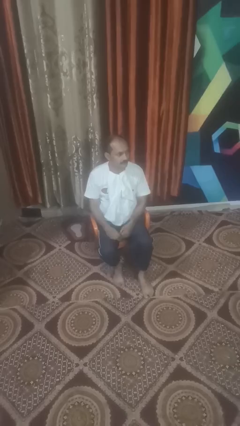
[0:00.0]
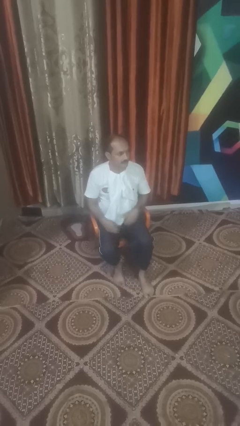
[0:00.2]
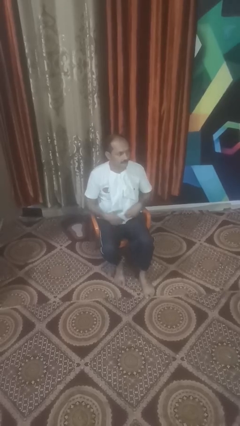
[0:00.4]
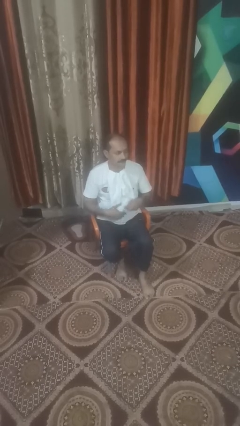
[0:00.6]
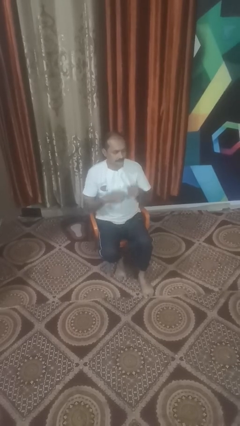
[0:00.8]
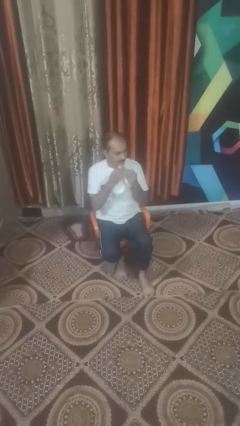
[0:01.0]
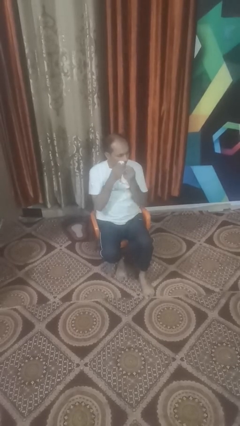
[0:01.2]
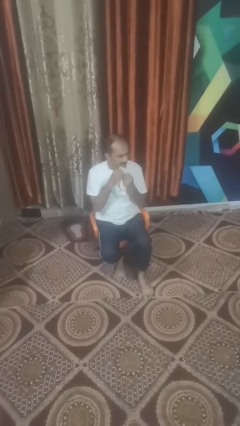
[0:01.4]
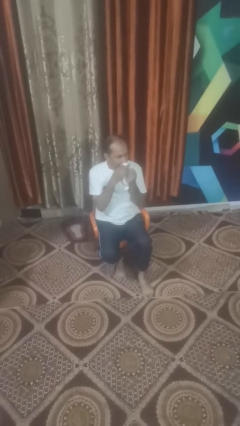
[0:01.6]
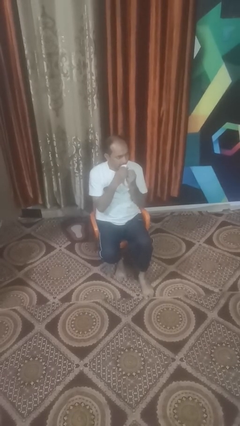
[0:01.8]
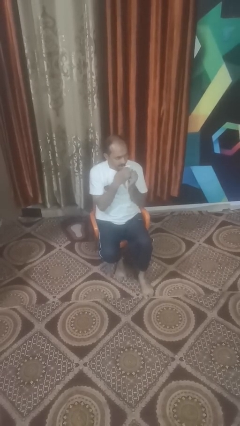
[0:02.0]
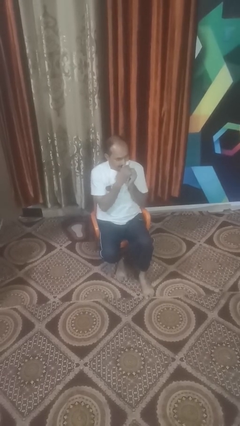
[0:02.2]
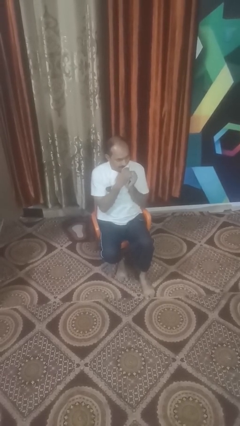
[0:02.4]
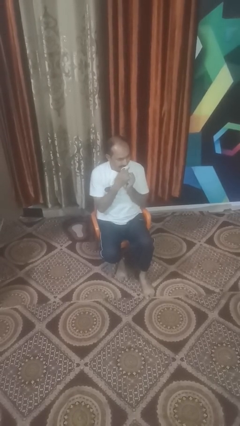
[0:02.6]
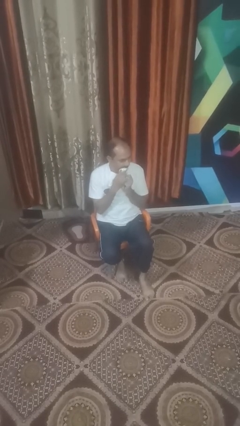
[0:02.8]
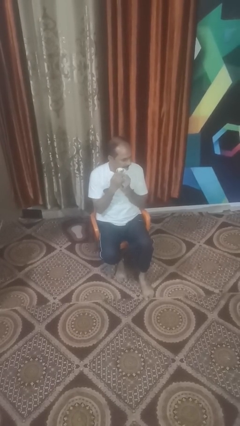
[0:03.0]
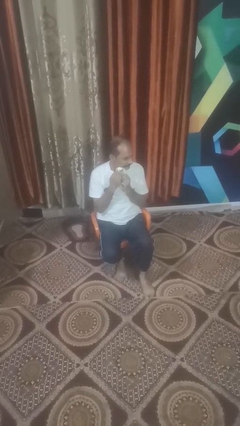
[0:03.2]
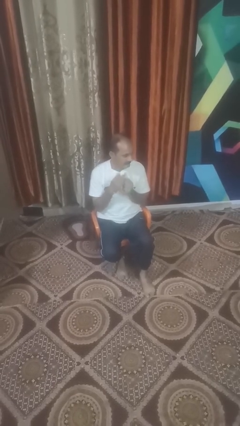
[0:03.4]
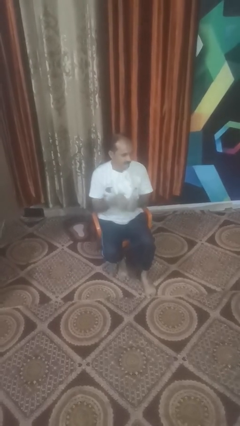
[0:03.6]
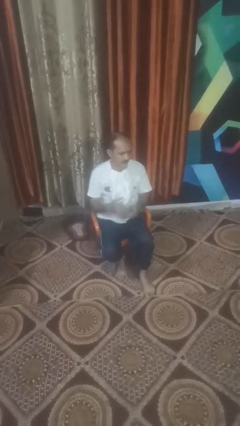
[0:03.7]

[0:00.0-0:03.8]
person wipes mouth with napkin

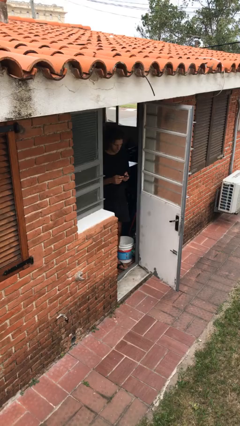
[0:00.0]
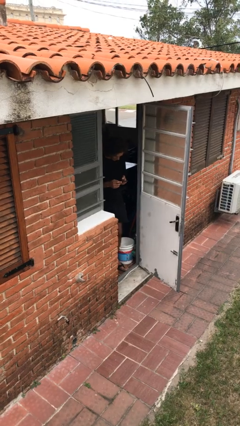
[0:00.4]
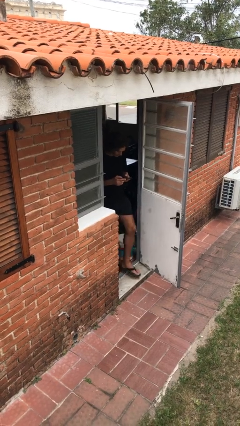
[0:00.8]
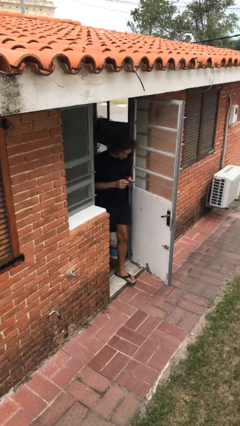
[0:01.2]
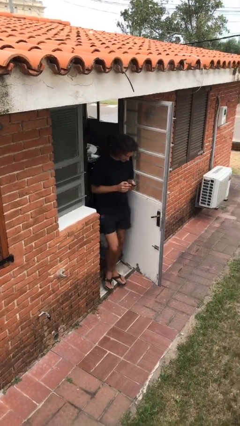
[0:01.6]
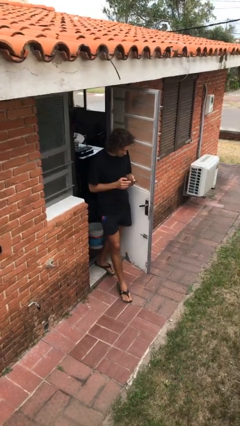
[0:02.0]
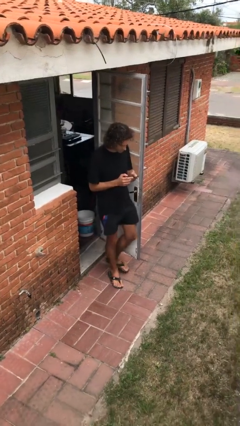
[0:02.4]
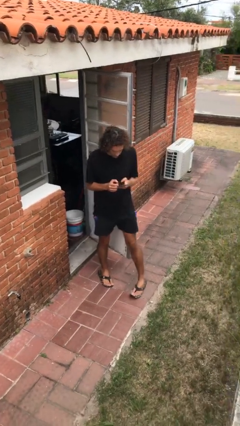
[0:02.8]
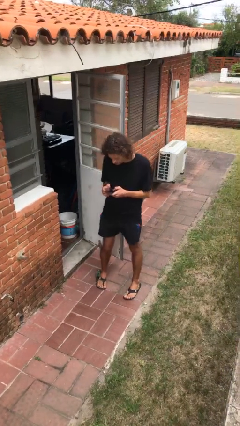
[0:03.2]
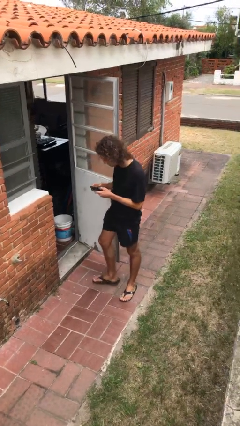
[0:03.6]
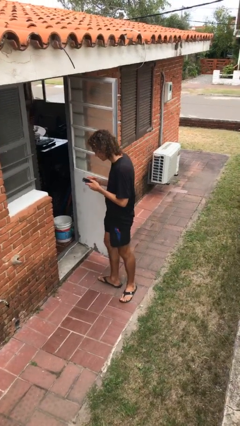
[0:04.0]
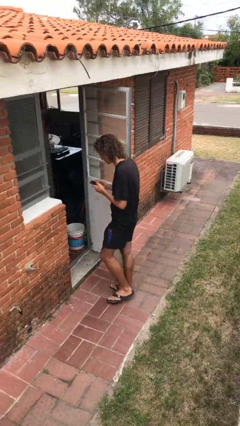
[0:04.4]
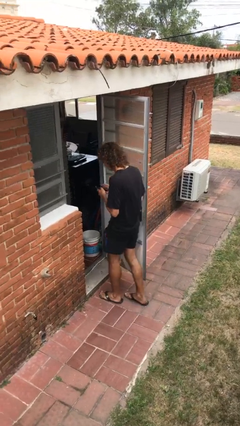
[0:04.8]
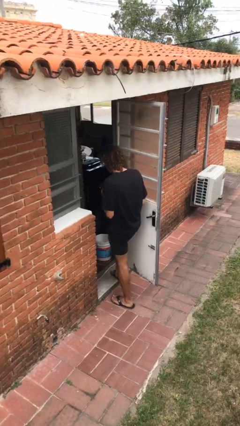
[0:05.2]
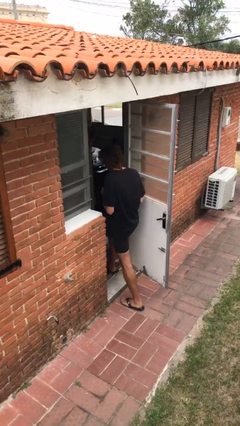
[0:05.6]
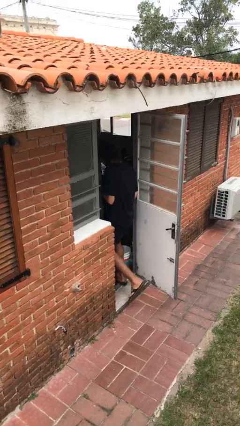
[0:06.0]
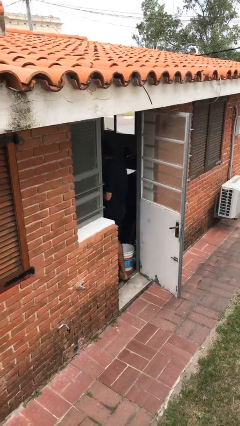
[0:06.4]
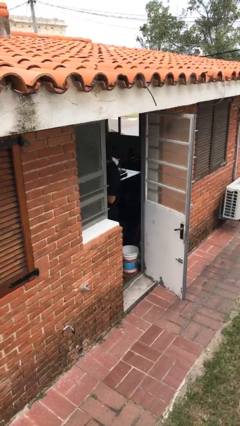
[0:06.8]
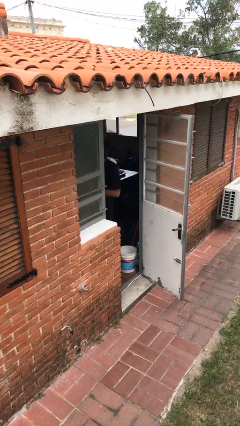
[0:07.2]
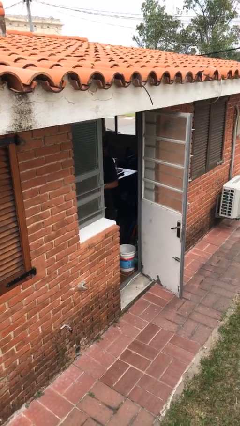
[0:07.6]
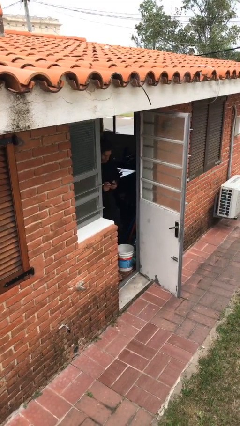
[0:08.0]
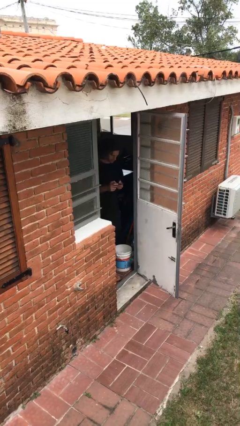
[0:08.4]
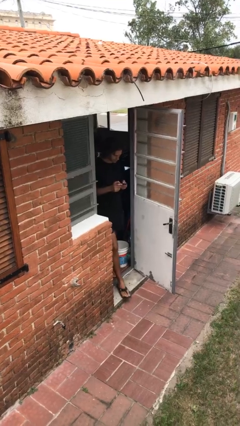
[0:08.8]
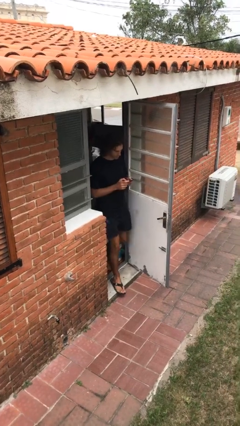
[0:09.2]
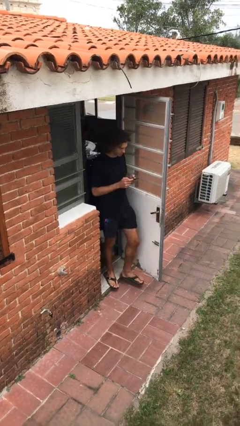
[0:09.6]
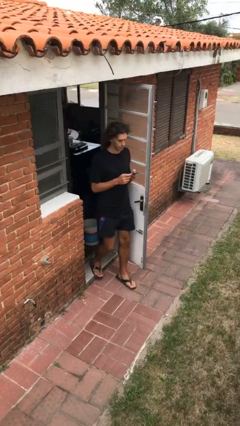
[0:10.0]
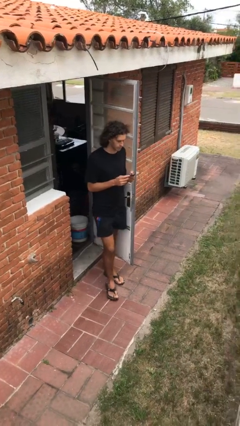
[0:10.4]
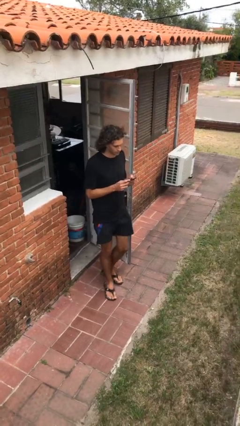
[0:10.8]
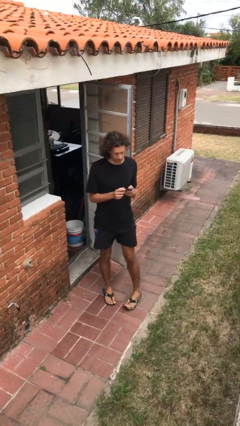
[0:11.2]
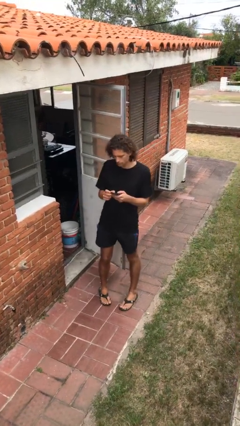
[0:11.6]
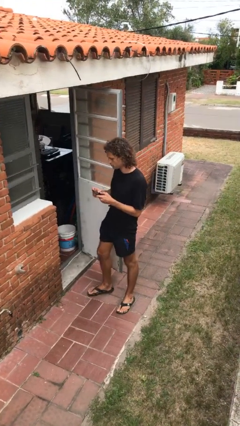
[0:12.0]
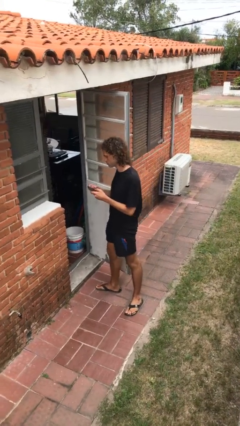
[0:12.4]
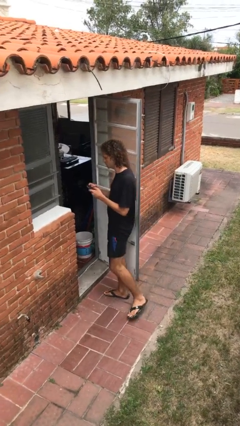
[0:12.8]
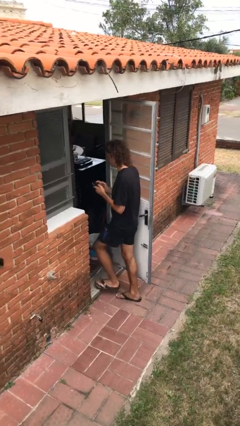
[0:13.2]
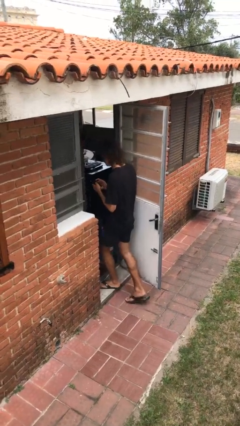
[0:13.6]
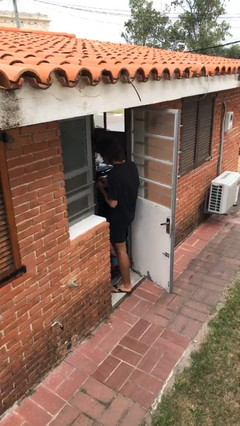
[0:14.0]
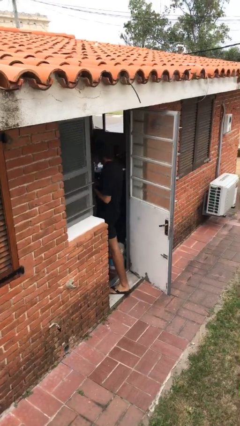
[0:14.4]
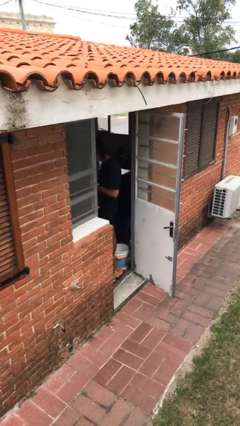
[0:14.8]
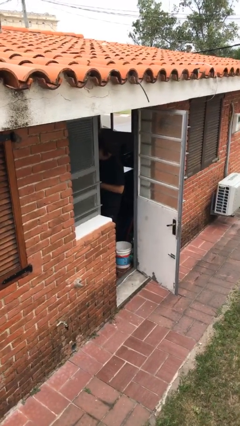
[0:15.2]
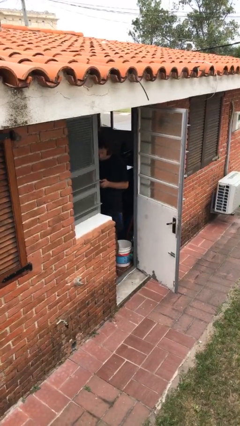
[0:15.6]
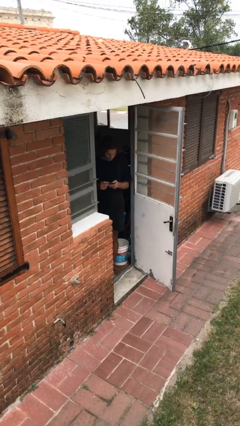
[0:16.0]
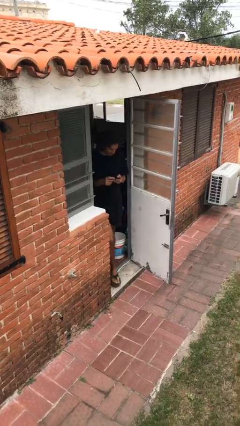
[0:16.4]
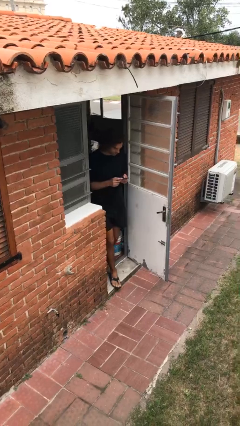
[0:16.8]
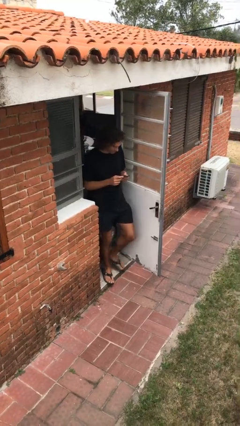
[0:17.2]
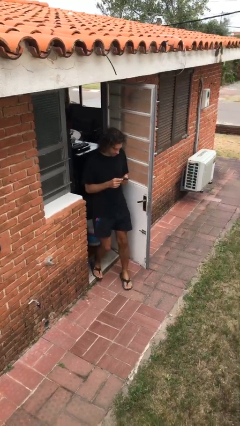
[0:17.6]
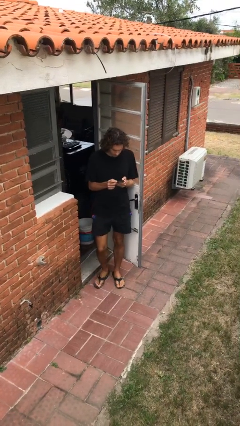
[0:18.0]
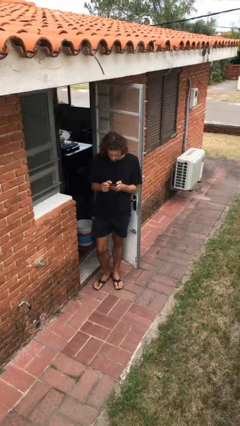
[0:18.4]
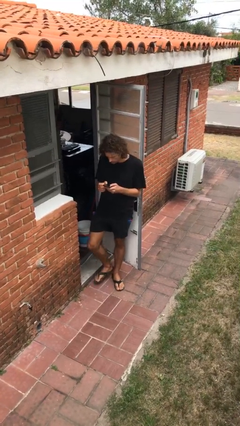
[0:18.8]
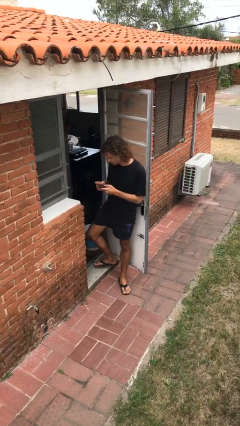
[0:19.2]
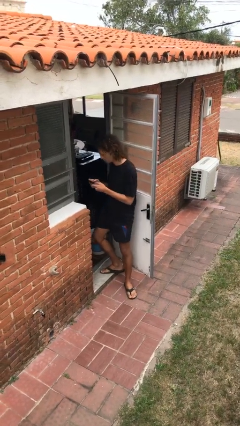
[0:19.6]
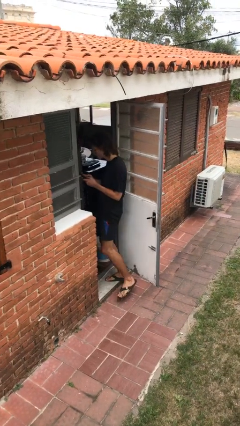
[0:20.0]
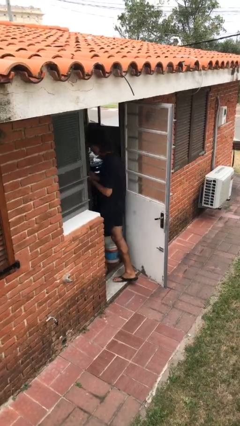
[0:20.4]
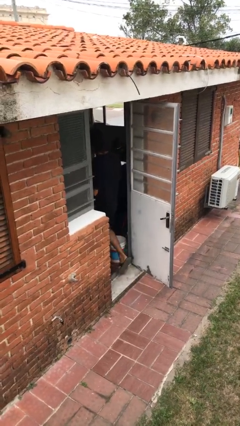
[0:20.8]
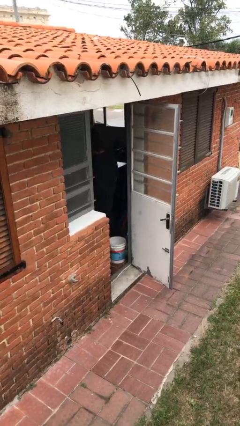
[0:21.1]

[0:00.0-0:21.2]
person texts on phone

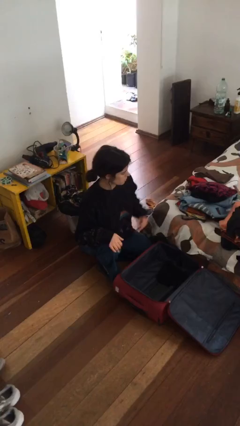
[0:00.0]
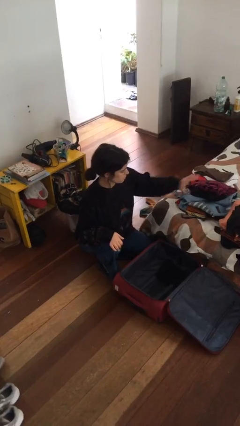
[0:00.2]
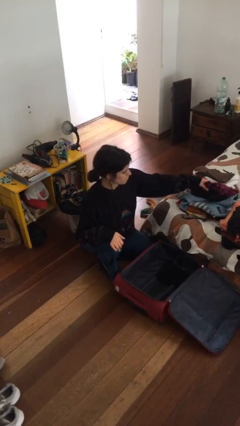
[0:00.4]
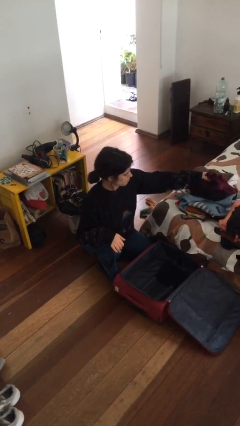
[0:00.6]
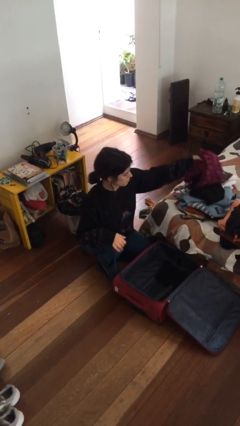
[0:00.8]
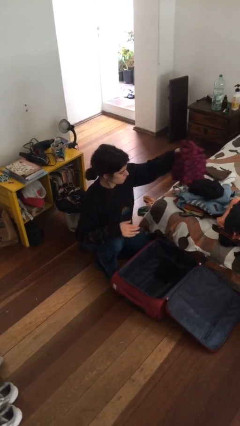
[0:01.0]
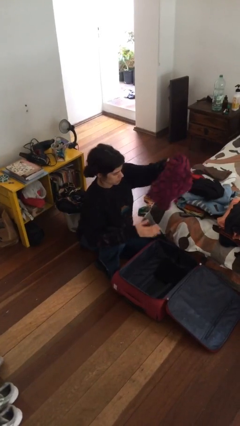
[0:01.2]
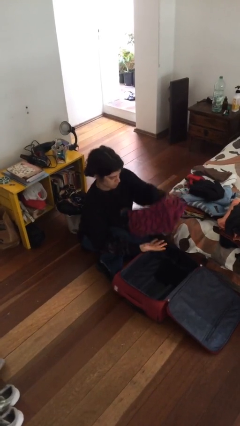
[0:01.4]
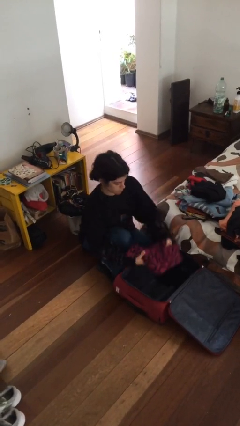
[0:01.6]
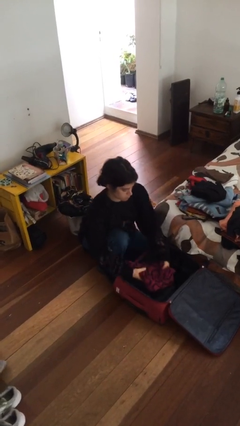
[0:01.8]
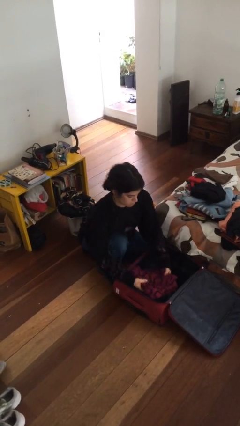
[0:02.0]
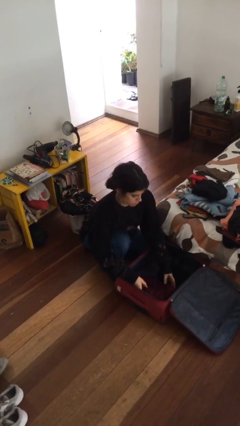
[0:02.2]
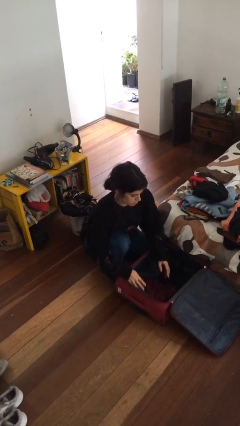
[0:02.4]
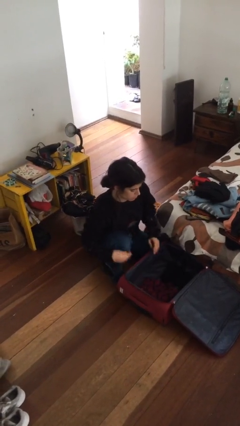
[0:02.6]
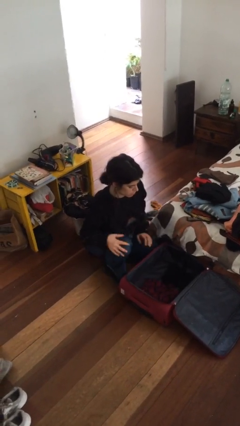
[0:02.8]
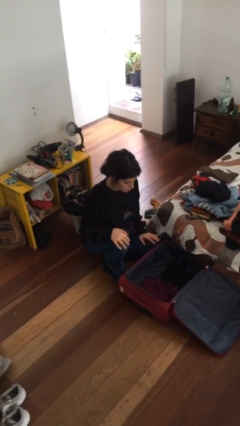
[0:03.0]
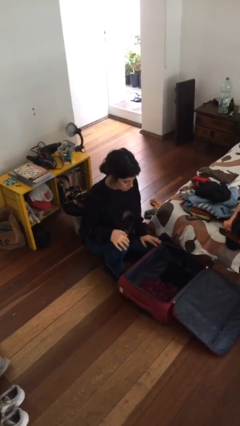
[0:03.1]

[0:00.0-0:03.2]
person loads clothes into suitcase

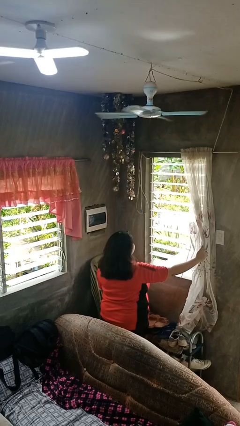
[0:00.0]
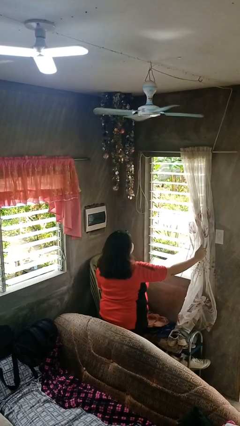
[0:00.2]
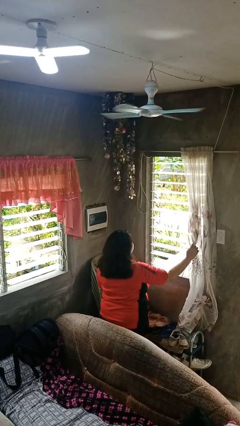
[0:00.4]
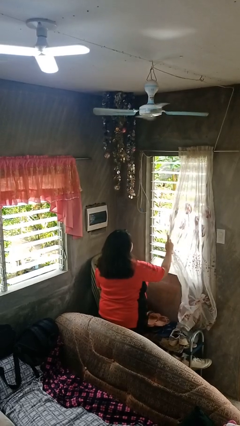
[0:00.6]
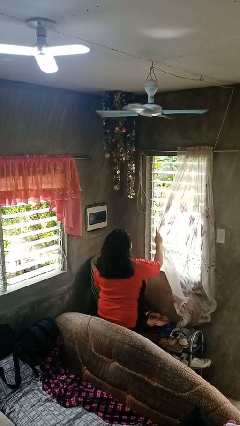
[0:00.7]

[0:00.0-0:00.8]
person closes curtains
